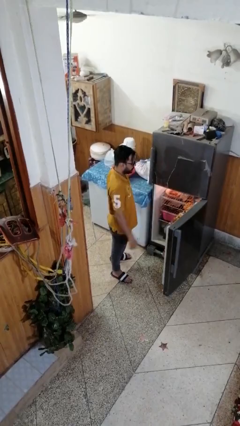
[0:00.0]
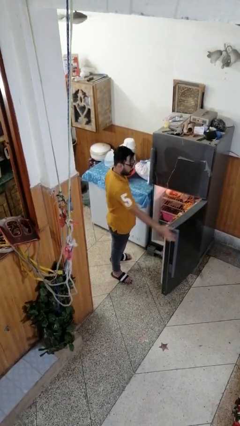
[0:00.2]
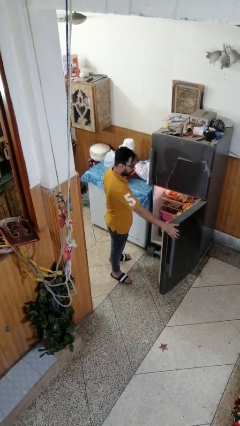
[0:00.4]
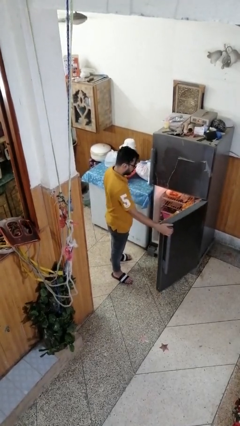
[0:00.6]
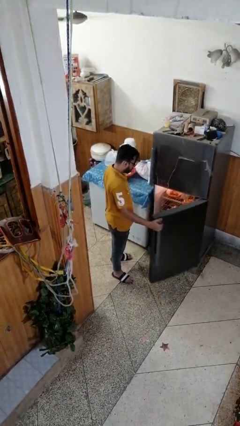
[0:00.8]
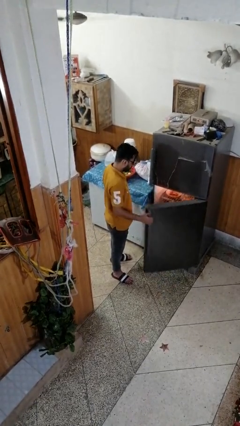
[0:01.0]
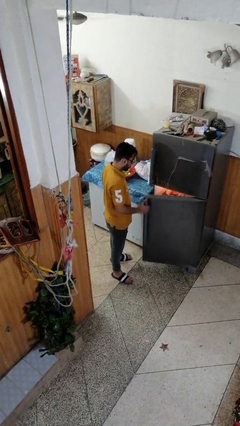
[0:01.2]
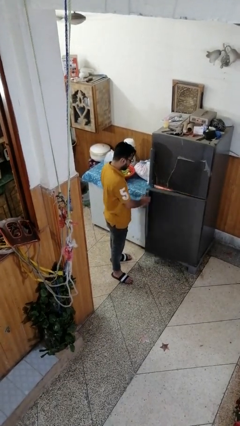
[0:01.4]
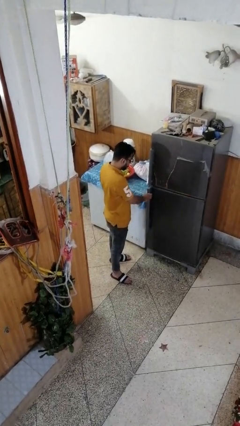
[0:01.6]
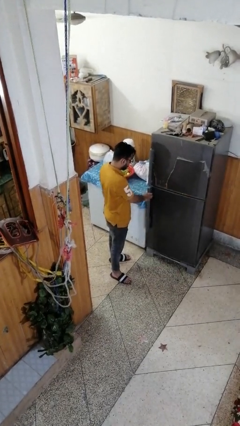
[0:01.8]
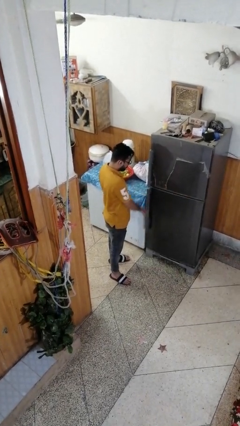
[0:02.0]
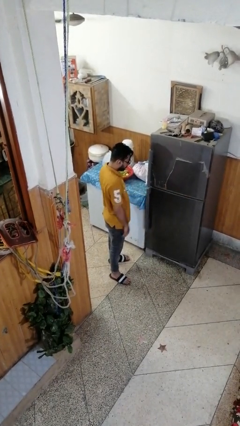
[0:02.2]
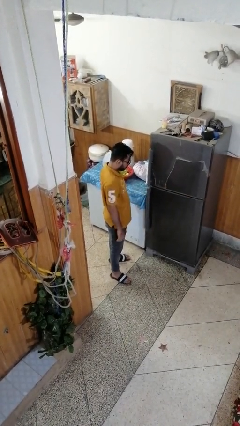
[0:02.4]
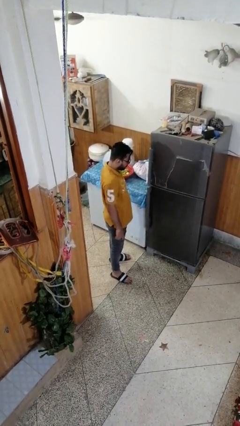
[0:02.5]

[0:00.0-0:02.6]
person closes refrigerator

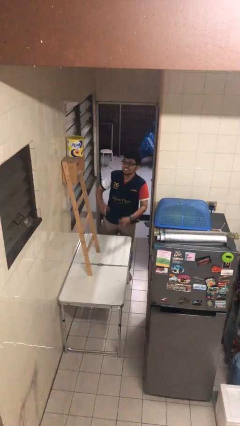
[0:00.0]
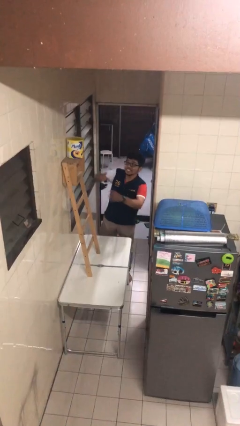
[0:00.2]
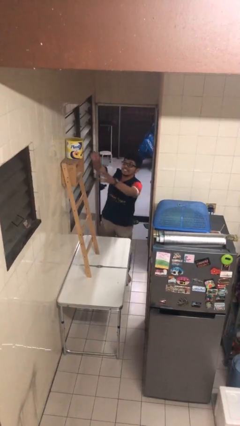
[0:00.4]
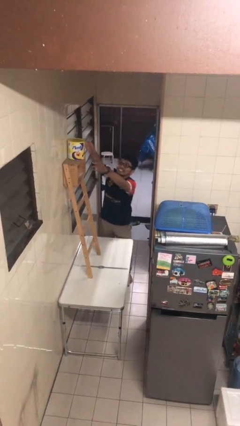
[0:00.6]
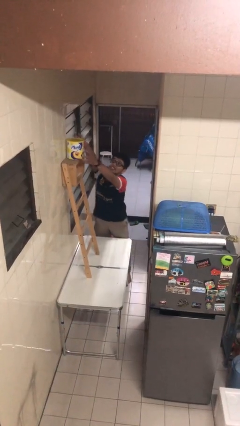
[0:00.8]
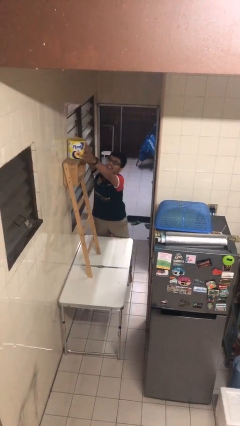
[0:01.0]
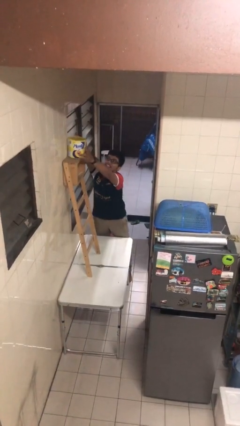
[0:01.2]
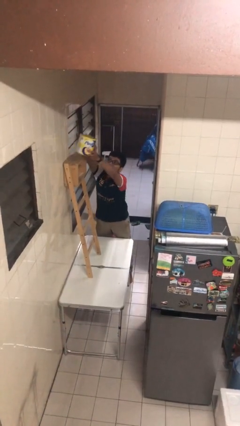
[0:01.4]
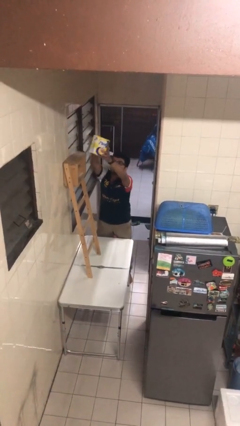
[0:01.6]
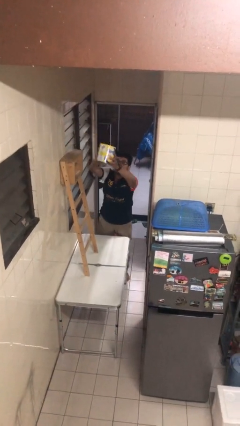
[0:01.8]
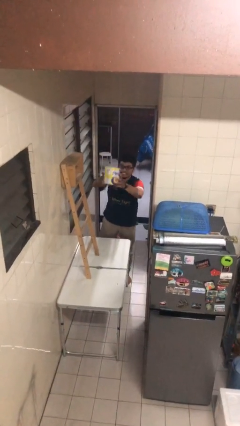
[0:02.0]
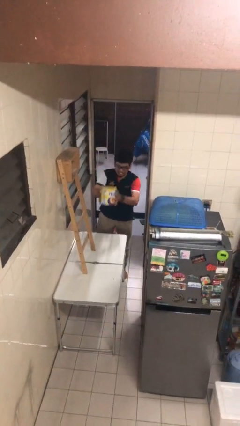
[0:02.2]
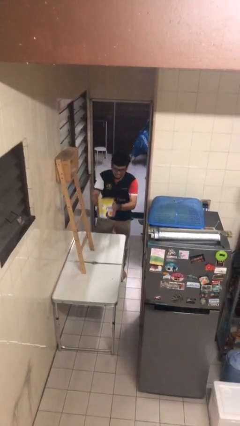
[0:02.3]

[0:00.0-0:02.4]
person picks up object from shelf

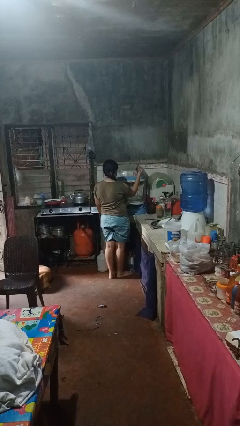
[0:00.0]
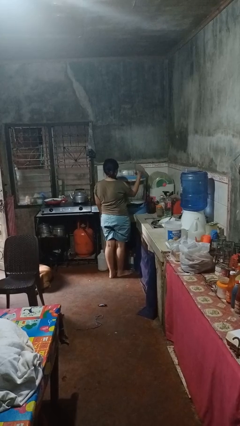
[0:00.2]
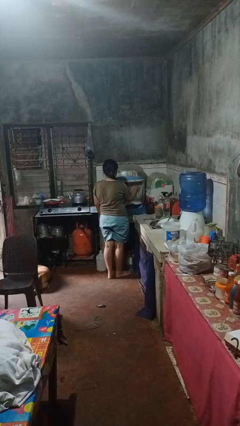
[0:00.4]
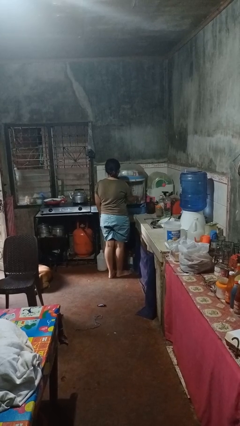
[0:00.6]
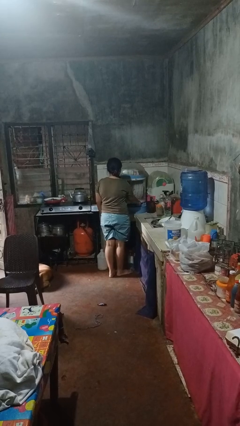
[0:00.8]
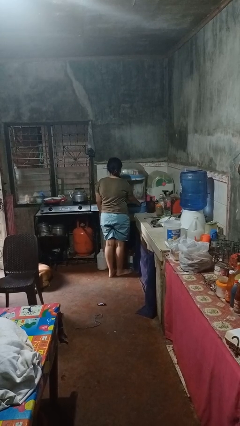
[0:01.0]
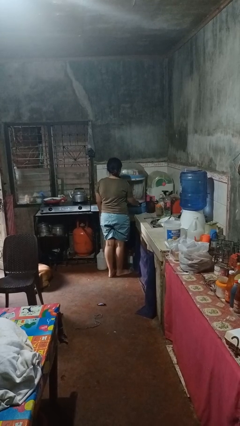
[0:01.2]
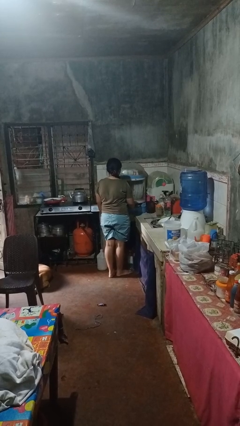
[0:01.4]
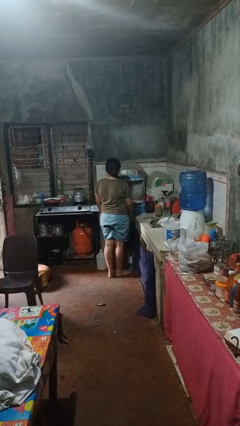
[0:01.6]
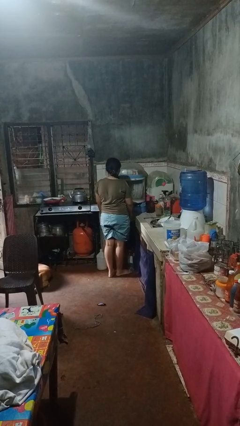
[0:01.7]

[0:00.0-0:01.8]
person puts object into kitchen drawer

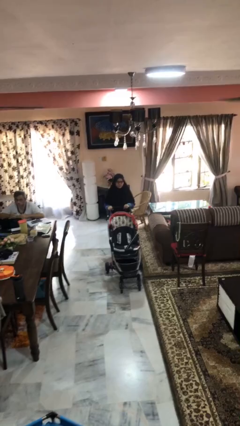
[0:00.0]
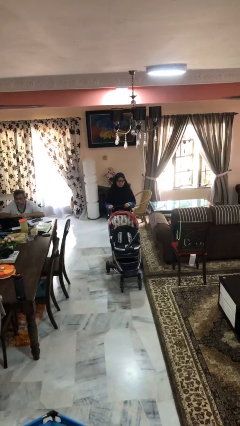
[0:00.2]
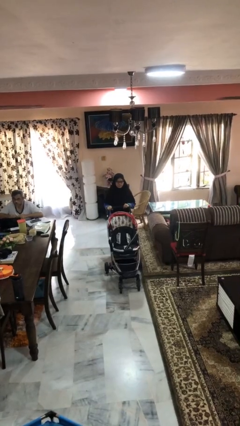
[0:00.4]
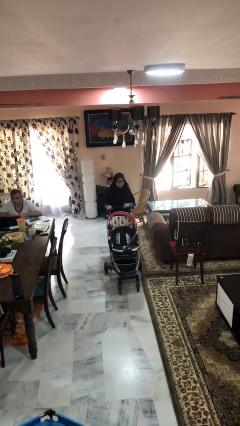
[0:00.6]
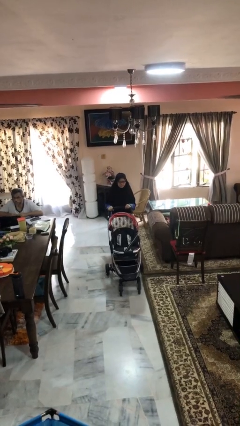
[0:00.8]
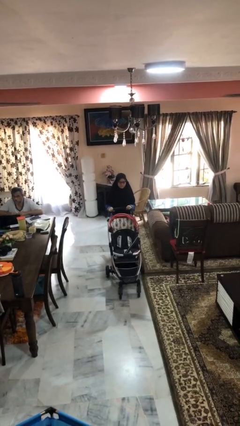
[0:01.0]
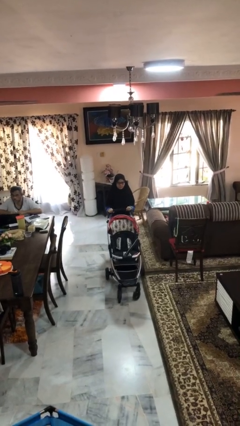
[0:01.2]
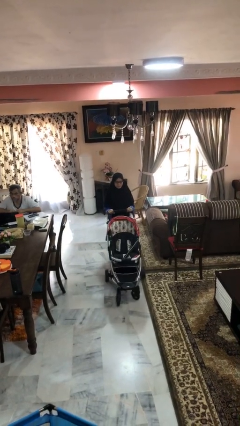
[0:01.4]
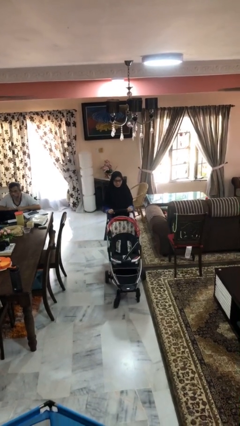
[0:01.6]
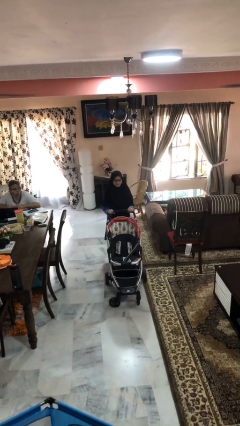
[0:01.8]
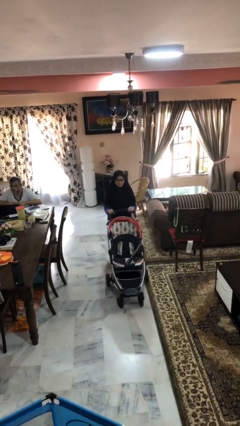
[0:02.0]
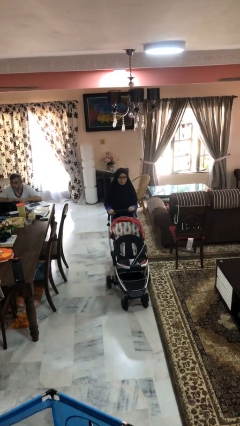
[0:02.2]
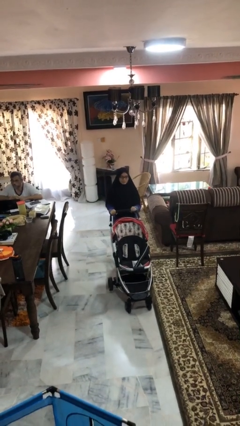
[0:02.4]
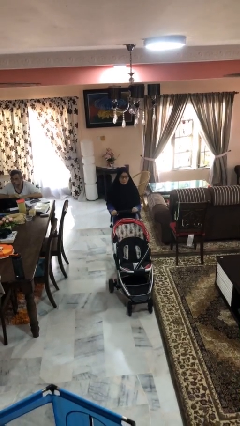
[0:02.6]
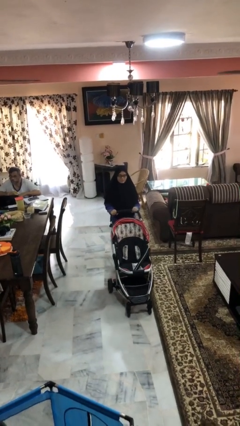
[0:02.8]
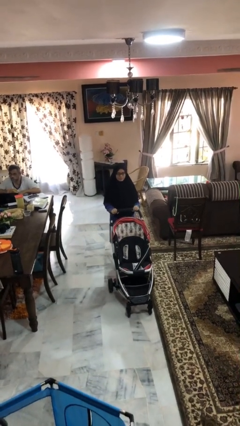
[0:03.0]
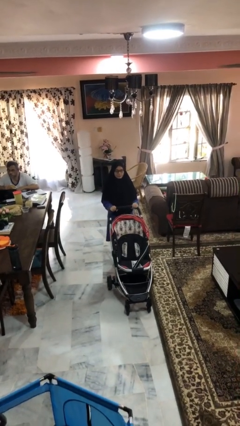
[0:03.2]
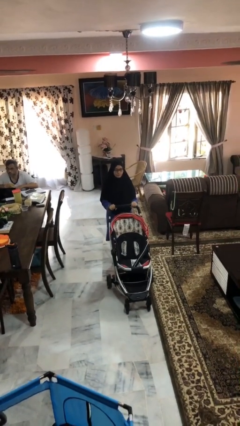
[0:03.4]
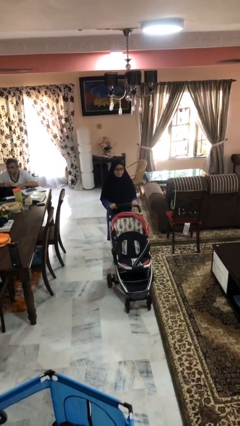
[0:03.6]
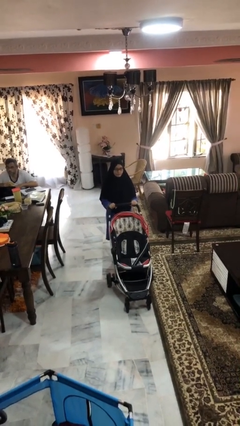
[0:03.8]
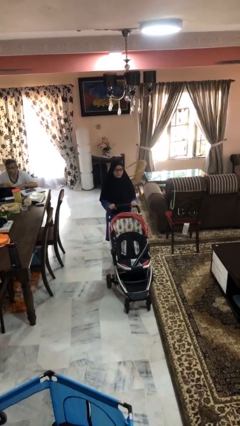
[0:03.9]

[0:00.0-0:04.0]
person pushes wheeled cart

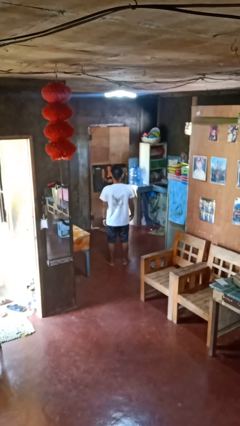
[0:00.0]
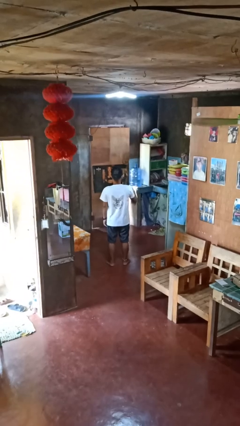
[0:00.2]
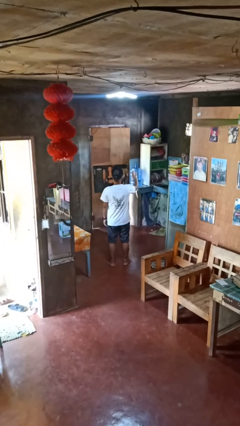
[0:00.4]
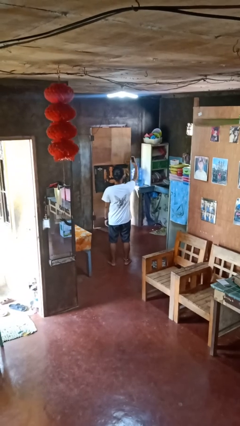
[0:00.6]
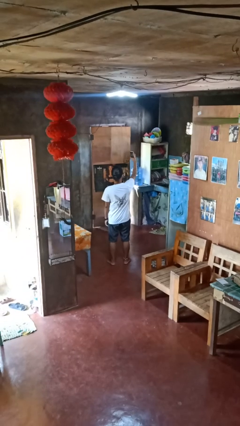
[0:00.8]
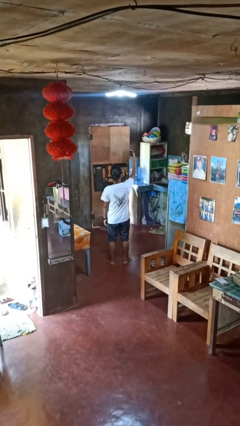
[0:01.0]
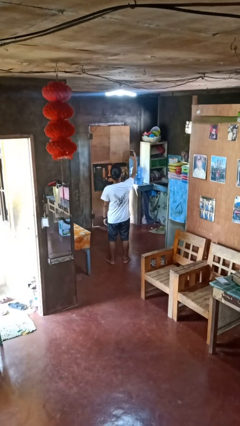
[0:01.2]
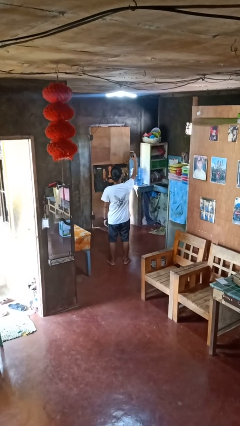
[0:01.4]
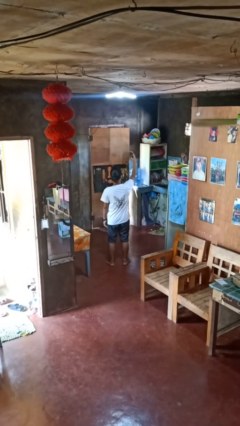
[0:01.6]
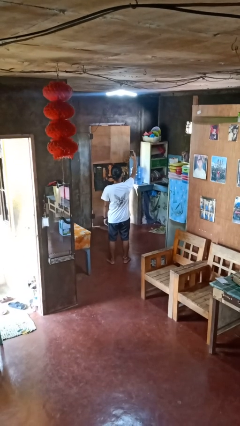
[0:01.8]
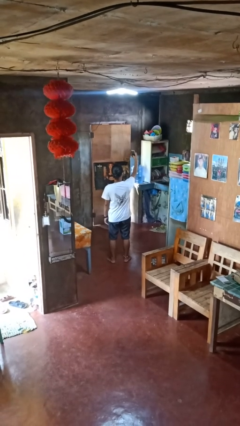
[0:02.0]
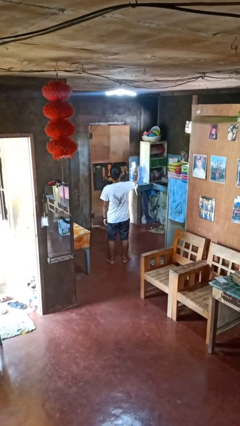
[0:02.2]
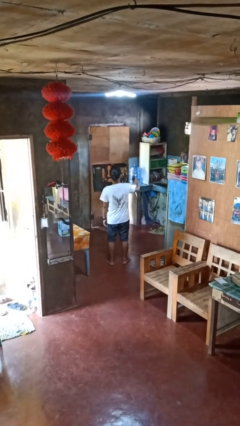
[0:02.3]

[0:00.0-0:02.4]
person takes selfie

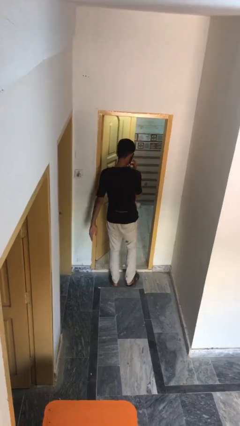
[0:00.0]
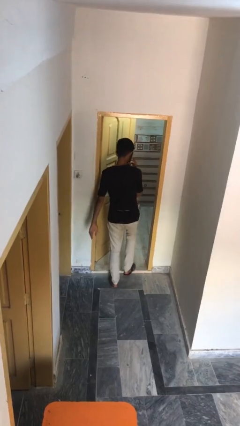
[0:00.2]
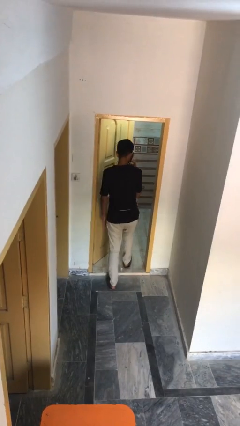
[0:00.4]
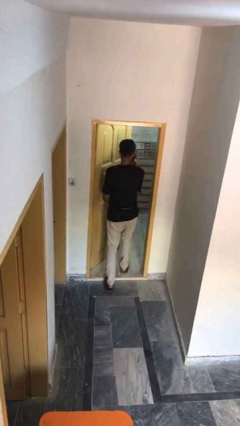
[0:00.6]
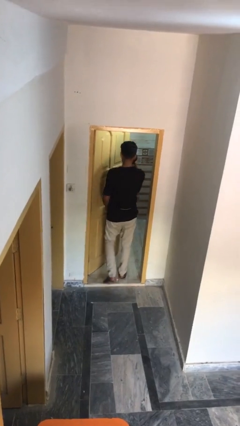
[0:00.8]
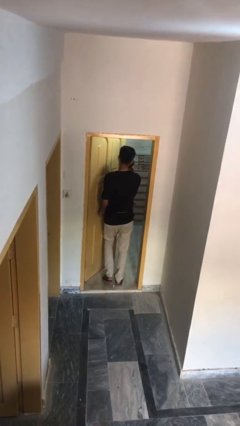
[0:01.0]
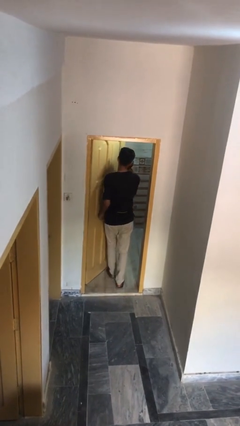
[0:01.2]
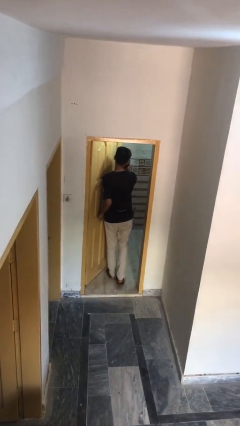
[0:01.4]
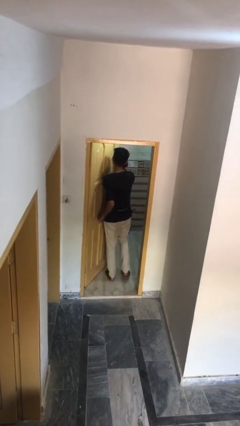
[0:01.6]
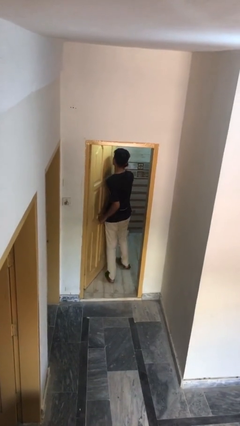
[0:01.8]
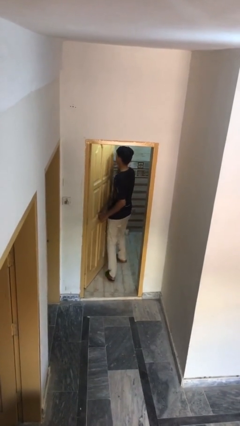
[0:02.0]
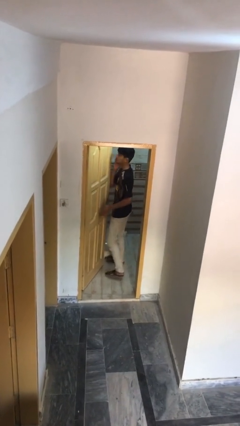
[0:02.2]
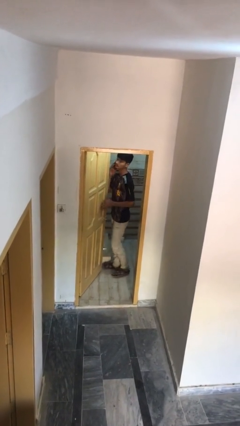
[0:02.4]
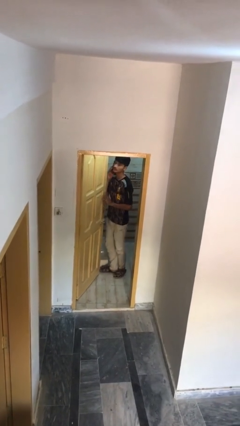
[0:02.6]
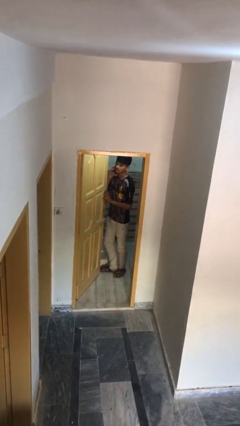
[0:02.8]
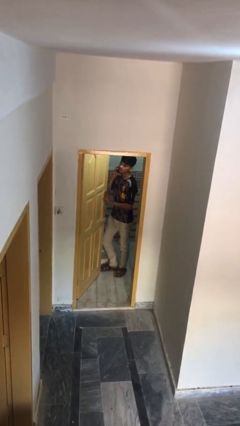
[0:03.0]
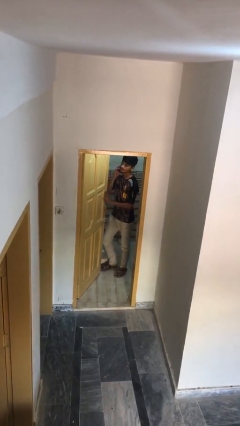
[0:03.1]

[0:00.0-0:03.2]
person exits scene through structure

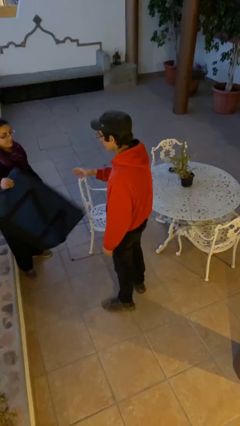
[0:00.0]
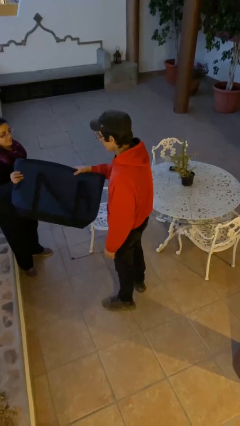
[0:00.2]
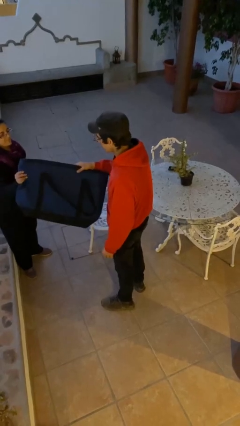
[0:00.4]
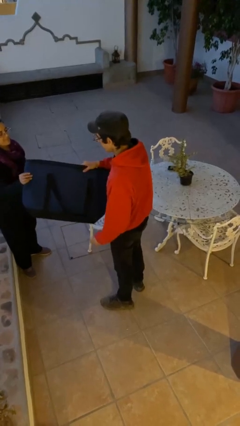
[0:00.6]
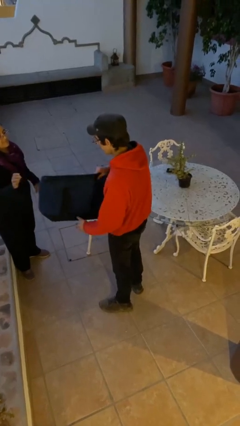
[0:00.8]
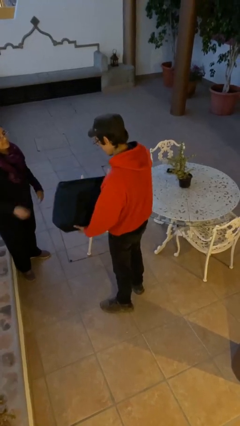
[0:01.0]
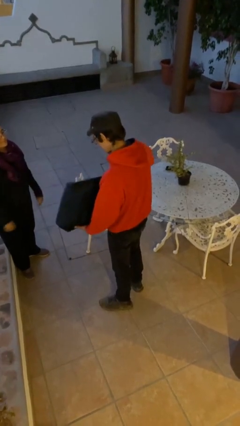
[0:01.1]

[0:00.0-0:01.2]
person transfers object to person
